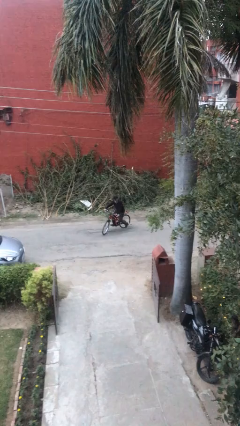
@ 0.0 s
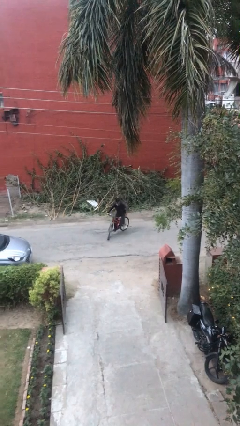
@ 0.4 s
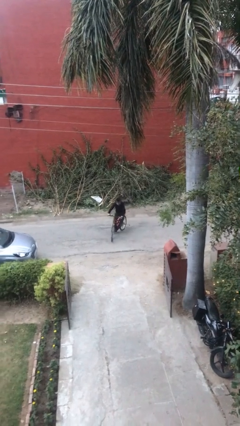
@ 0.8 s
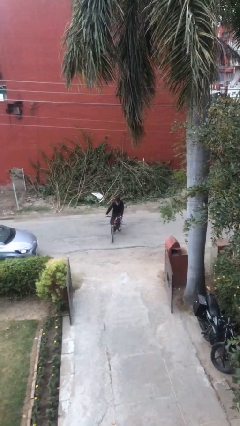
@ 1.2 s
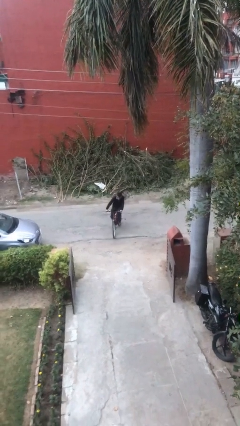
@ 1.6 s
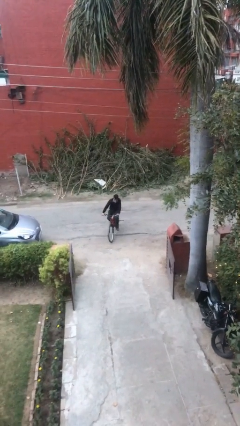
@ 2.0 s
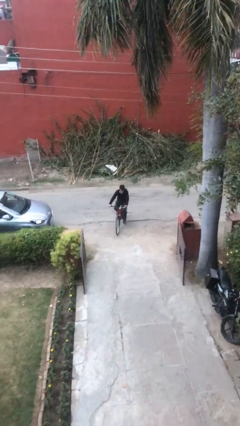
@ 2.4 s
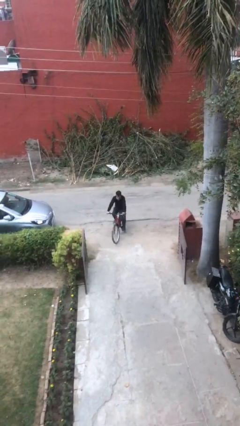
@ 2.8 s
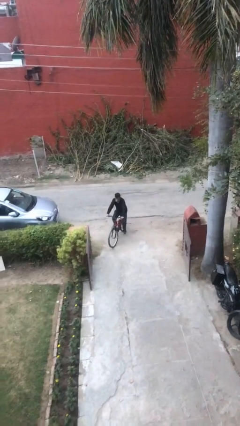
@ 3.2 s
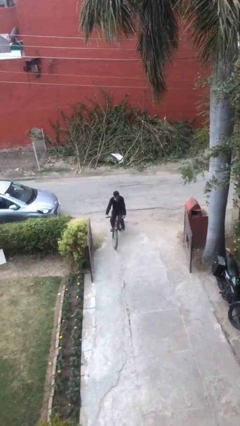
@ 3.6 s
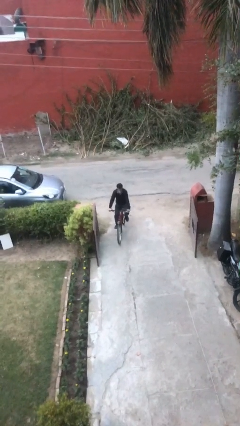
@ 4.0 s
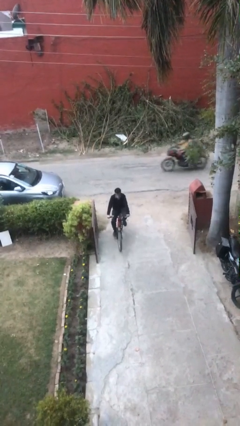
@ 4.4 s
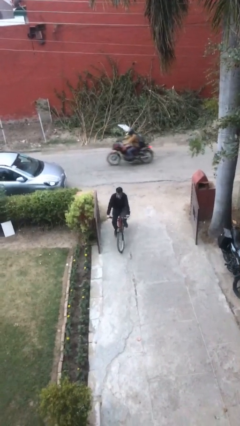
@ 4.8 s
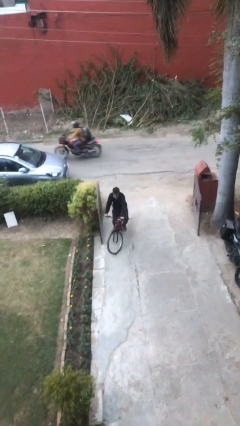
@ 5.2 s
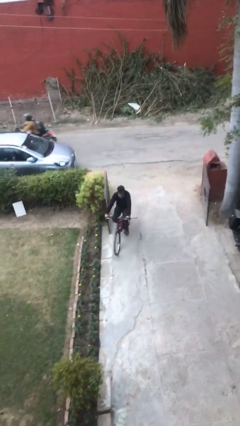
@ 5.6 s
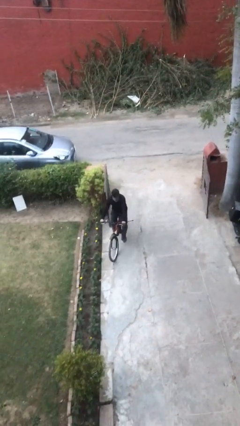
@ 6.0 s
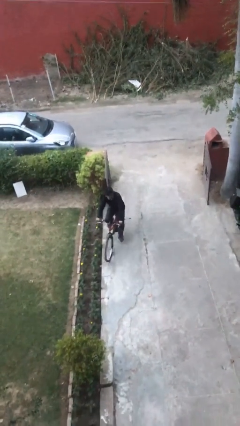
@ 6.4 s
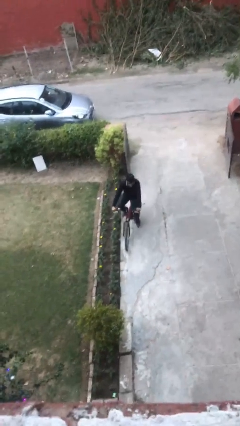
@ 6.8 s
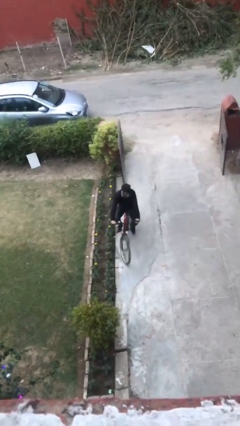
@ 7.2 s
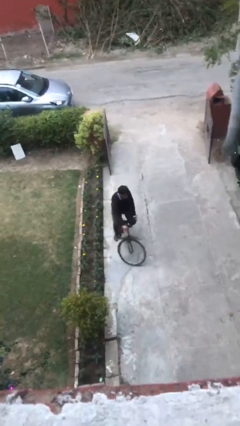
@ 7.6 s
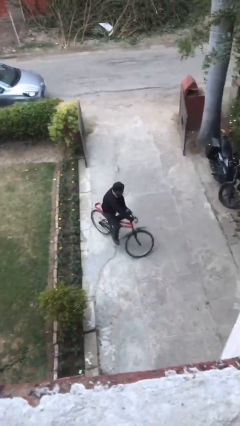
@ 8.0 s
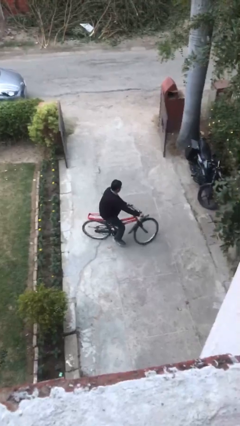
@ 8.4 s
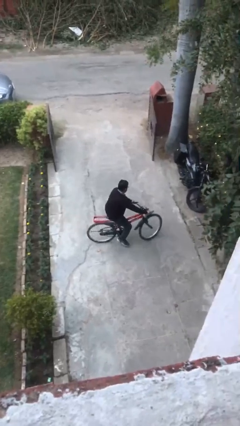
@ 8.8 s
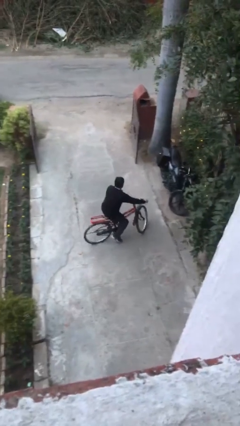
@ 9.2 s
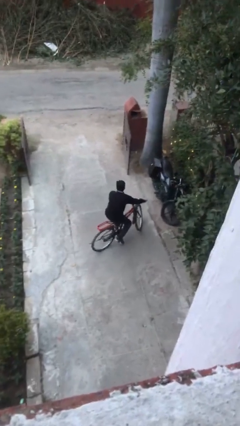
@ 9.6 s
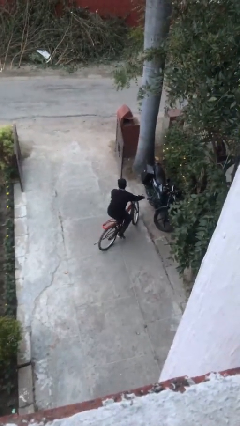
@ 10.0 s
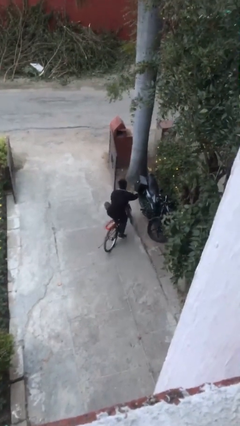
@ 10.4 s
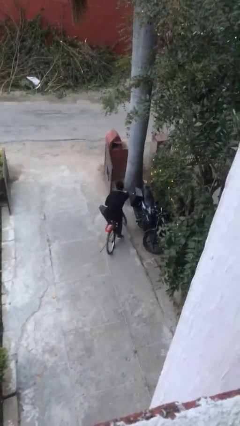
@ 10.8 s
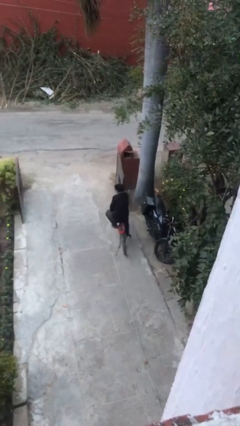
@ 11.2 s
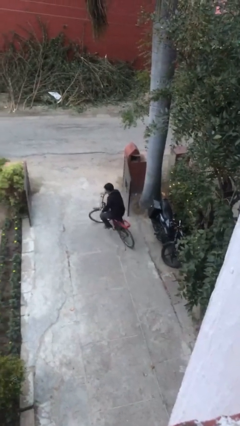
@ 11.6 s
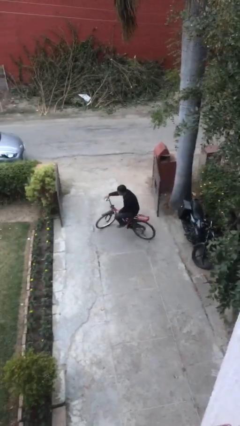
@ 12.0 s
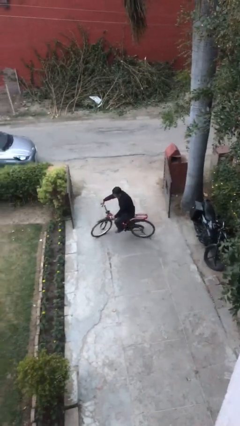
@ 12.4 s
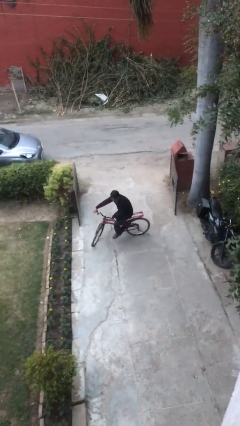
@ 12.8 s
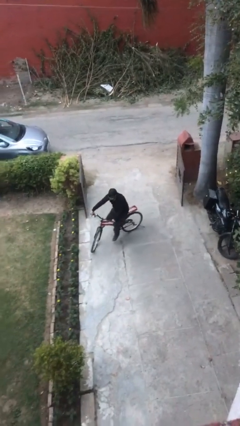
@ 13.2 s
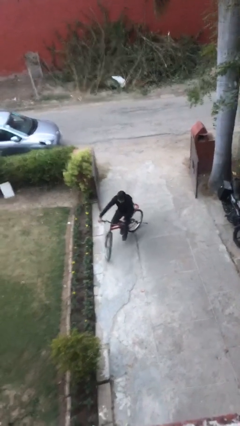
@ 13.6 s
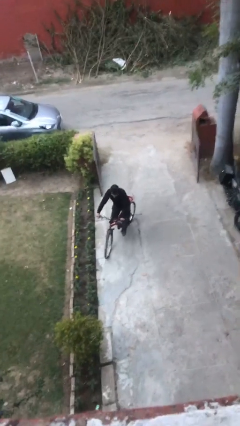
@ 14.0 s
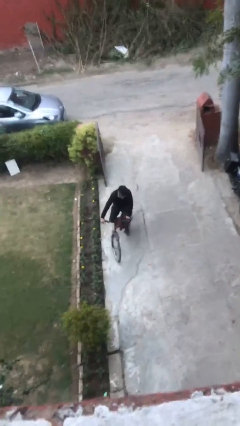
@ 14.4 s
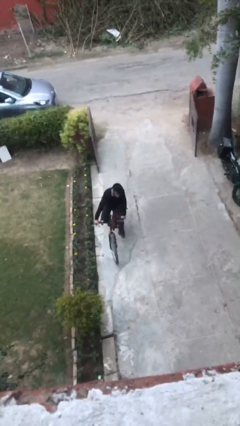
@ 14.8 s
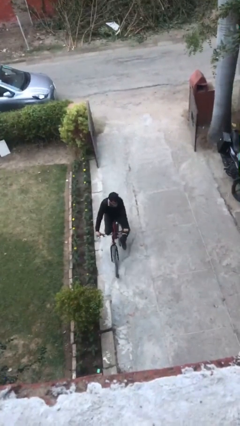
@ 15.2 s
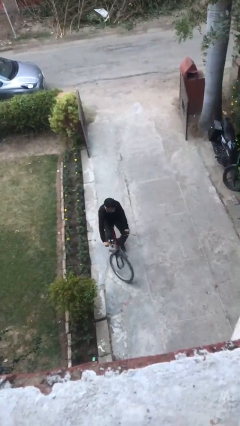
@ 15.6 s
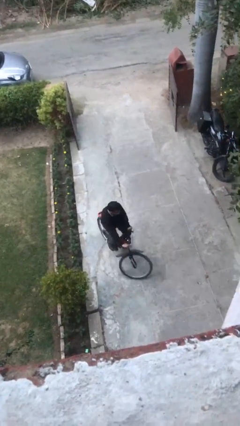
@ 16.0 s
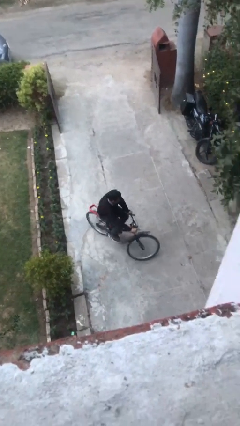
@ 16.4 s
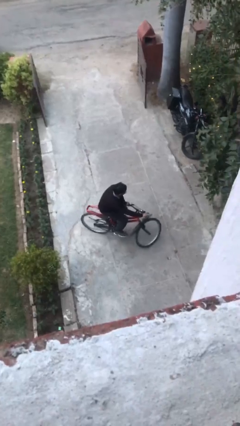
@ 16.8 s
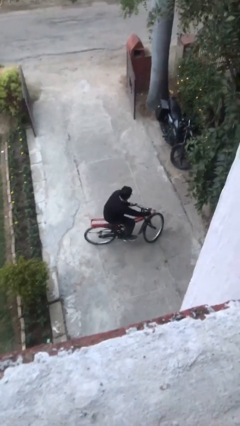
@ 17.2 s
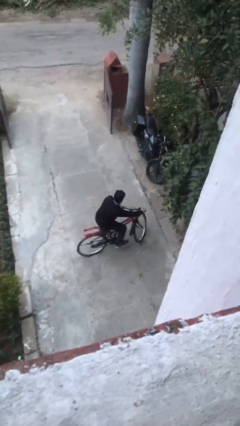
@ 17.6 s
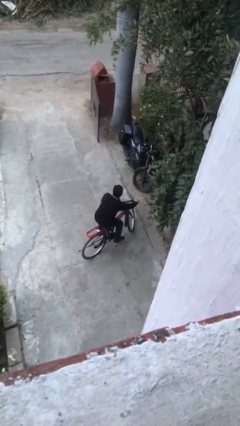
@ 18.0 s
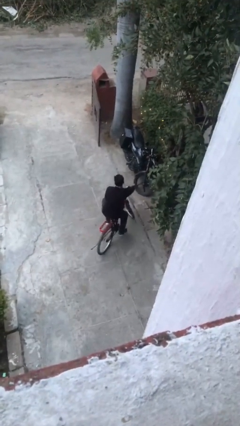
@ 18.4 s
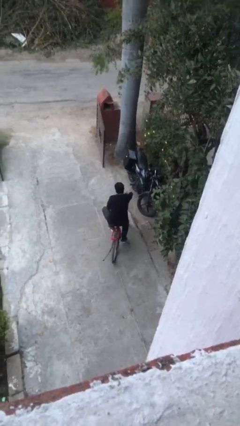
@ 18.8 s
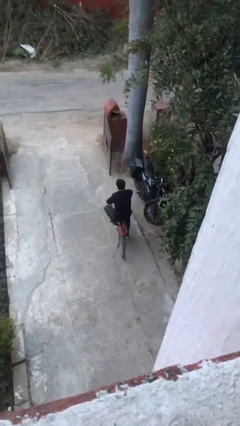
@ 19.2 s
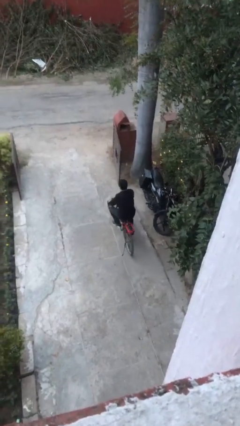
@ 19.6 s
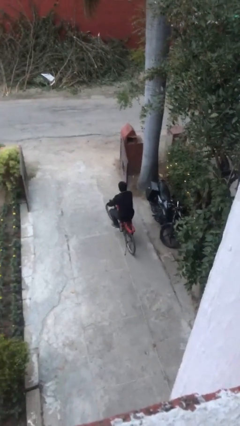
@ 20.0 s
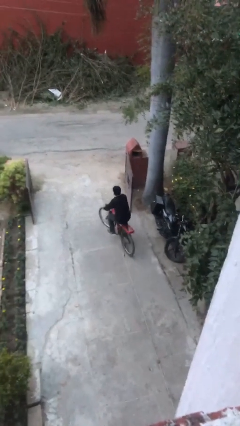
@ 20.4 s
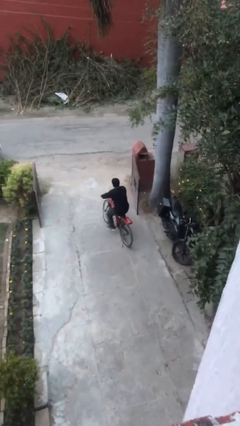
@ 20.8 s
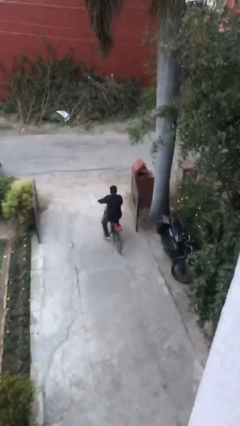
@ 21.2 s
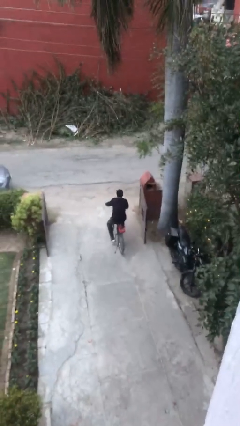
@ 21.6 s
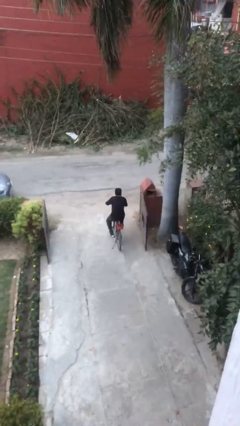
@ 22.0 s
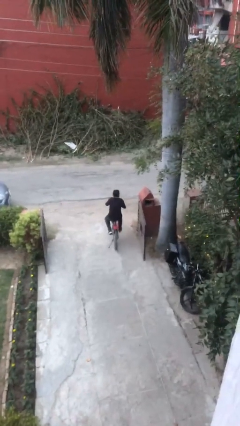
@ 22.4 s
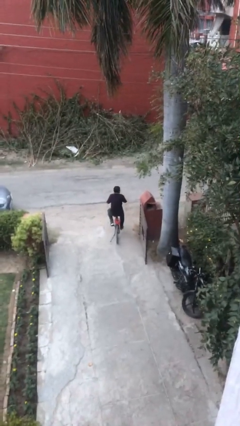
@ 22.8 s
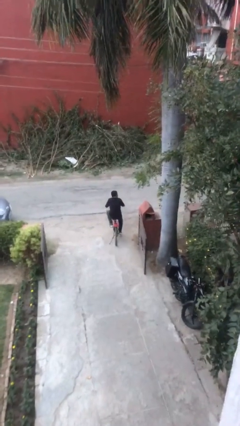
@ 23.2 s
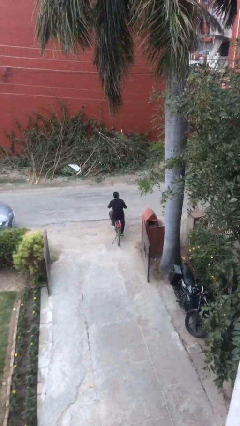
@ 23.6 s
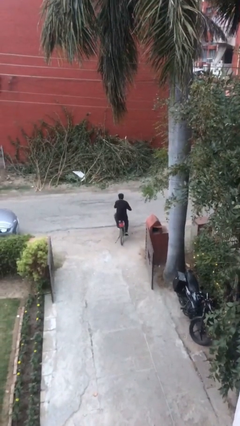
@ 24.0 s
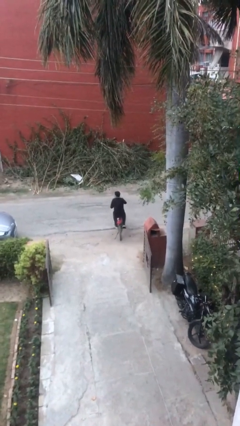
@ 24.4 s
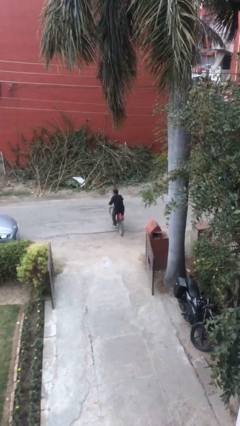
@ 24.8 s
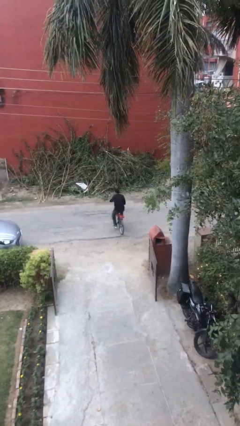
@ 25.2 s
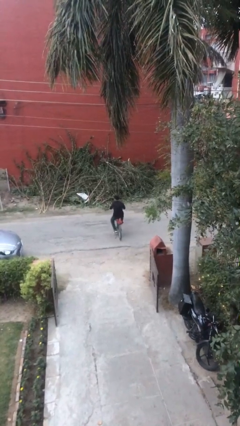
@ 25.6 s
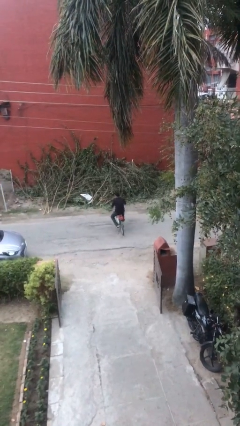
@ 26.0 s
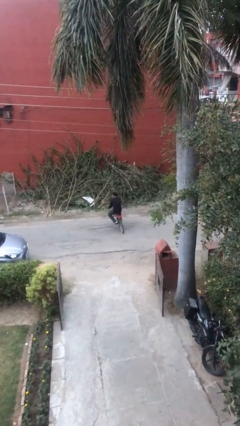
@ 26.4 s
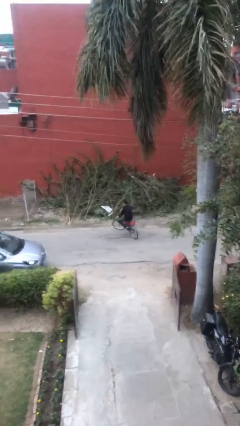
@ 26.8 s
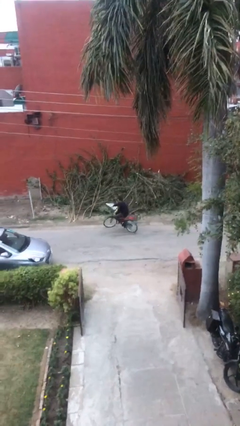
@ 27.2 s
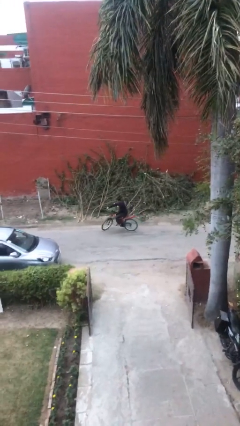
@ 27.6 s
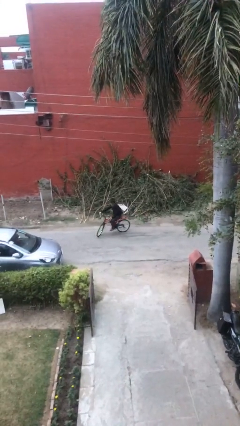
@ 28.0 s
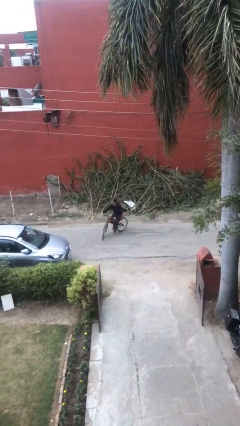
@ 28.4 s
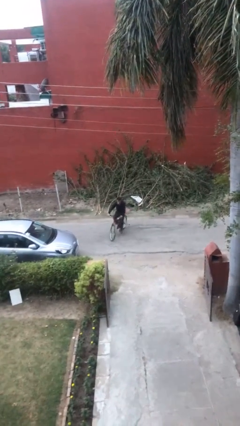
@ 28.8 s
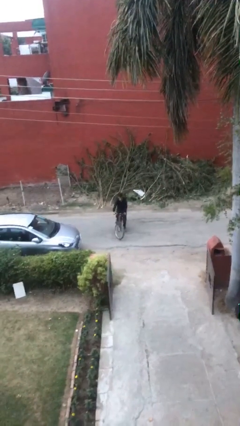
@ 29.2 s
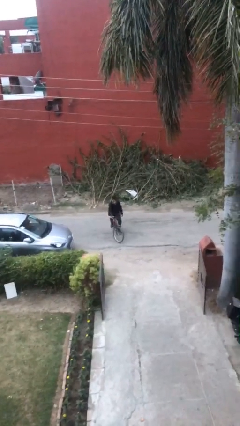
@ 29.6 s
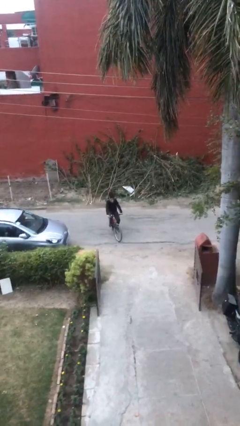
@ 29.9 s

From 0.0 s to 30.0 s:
person rides bicycle

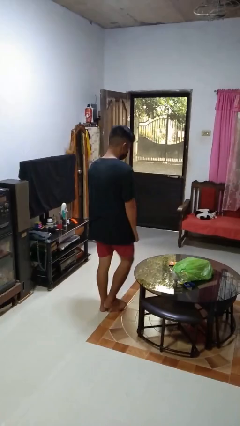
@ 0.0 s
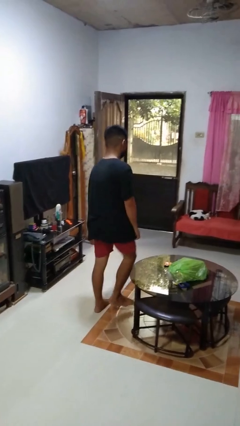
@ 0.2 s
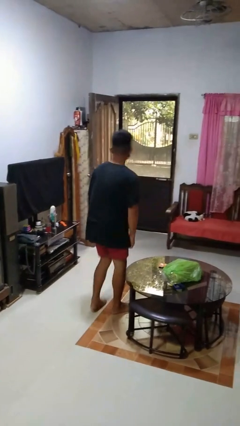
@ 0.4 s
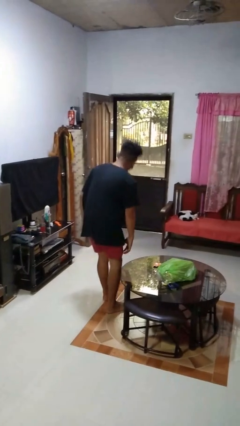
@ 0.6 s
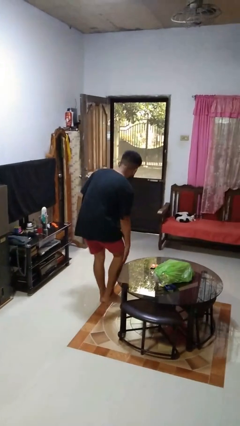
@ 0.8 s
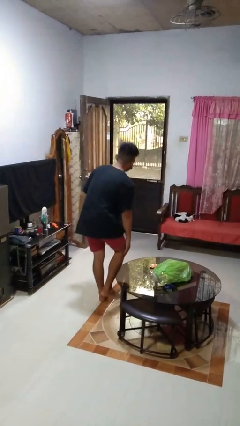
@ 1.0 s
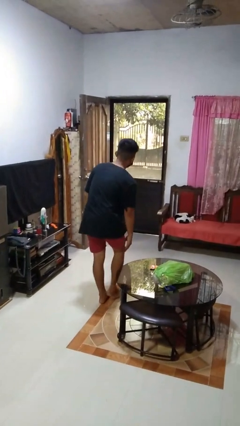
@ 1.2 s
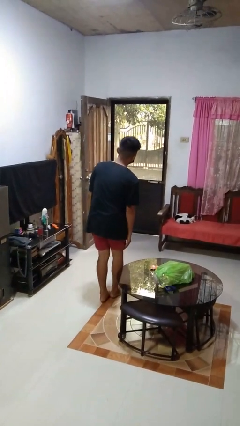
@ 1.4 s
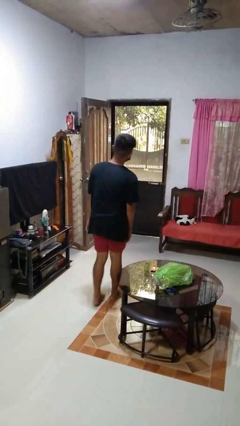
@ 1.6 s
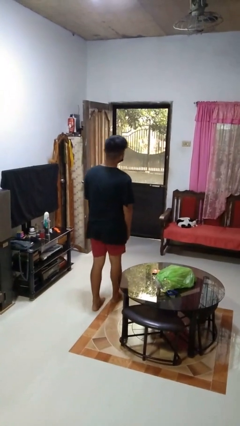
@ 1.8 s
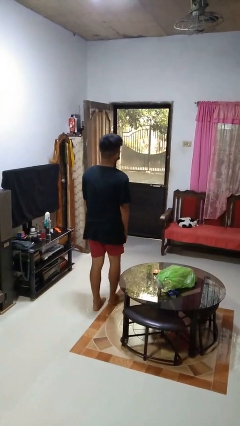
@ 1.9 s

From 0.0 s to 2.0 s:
person bumps into table

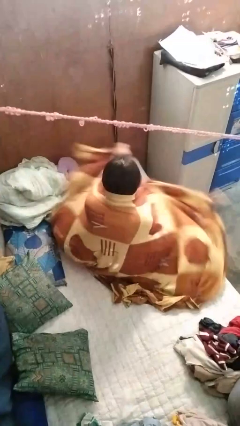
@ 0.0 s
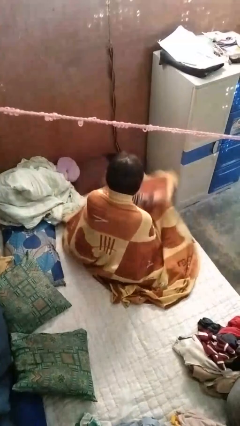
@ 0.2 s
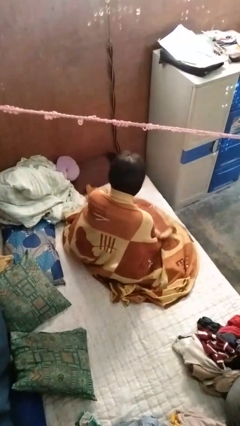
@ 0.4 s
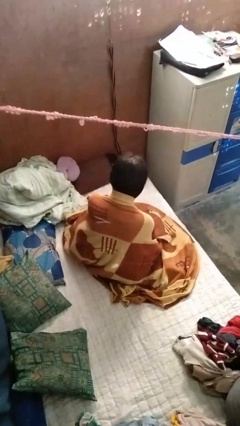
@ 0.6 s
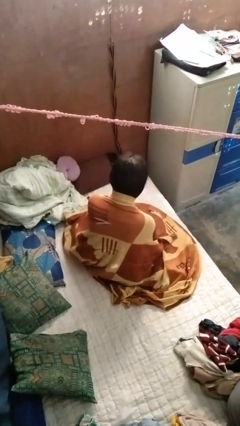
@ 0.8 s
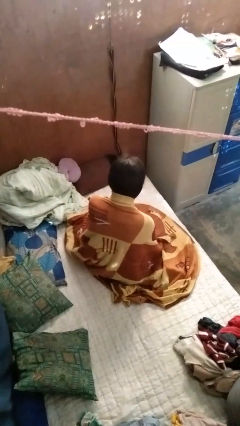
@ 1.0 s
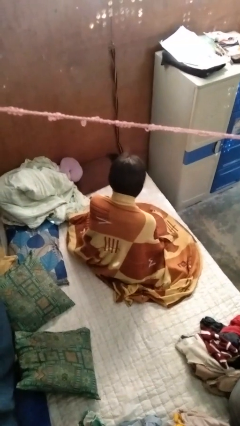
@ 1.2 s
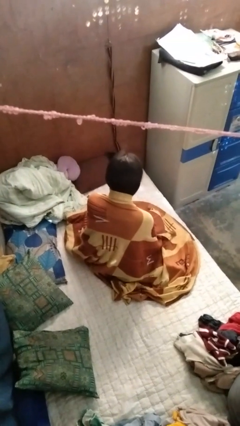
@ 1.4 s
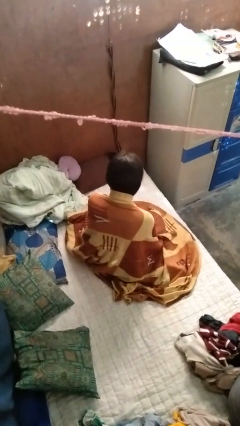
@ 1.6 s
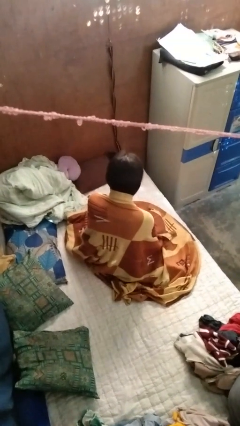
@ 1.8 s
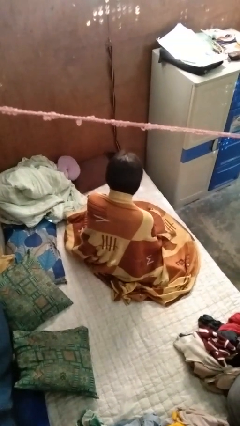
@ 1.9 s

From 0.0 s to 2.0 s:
person covers with blanket